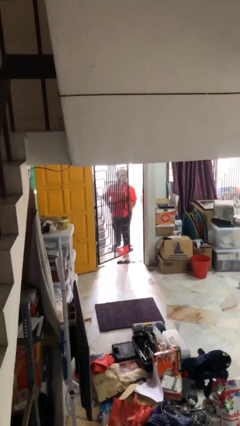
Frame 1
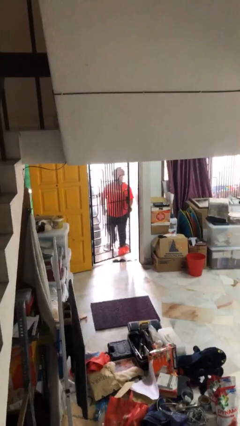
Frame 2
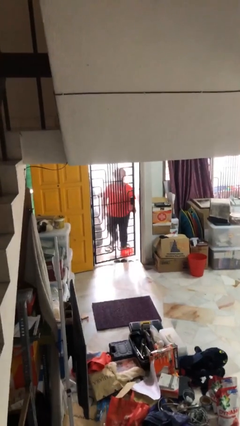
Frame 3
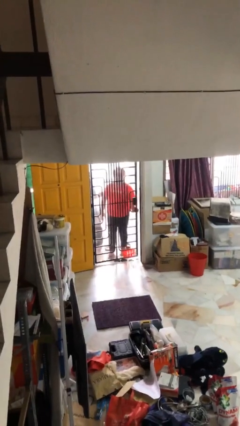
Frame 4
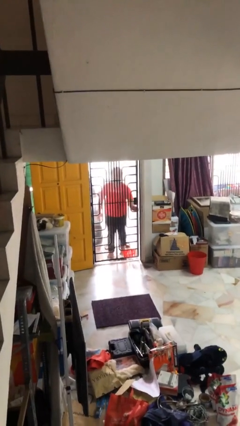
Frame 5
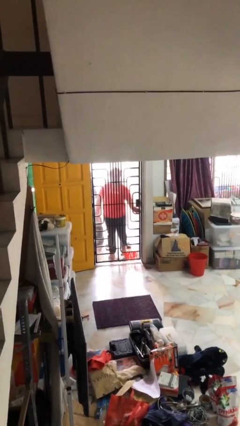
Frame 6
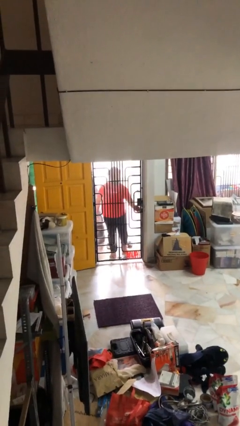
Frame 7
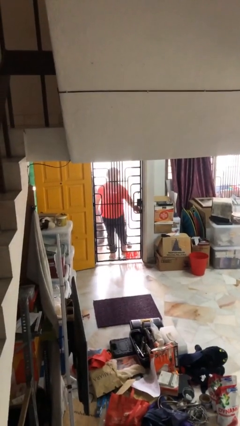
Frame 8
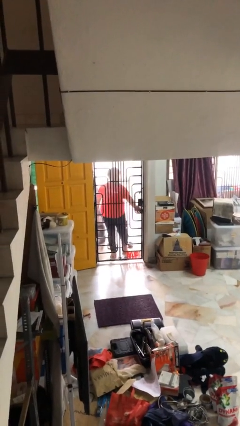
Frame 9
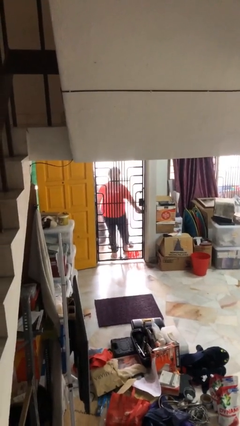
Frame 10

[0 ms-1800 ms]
person closes facility door

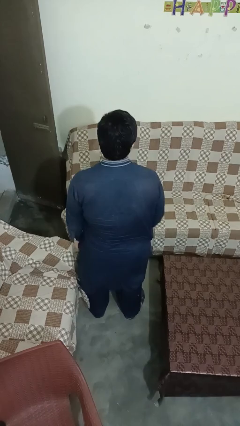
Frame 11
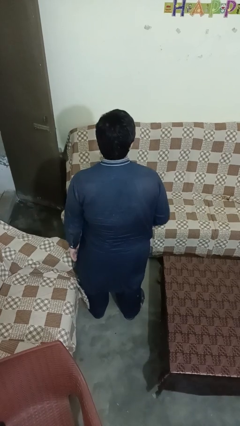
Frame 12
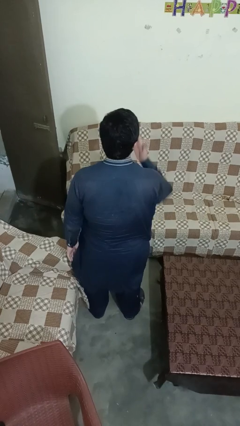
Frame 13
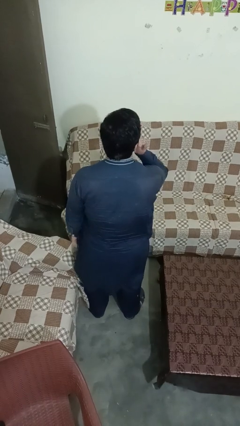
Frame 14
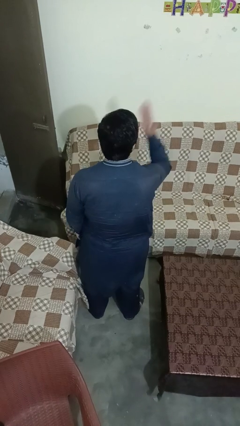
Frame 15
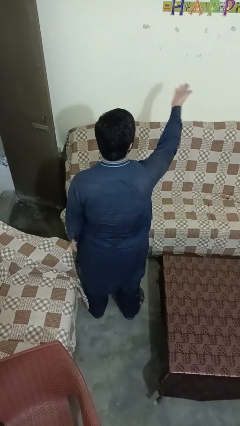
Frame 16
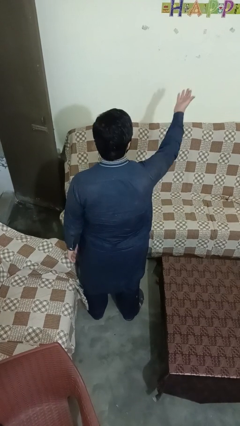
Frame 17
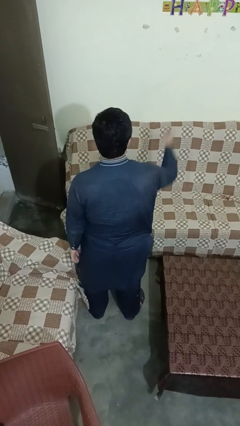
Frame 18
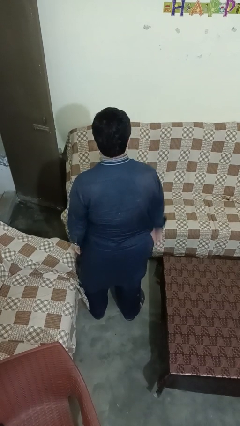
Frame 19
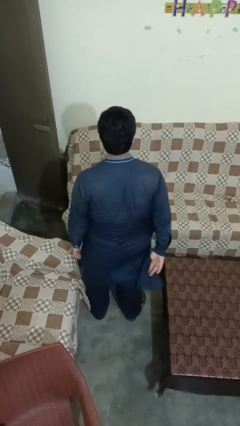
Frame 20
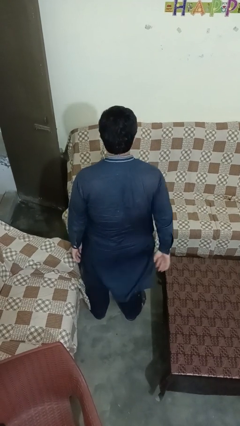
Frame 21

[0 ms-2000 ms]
person gestures blow kiss

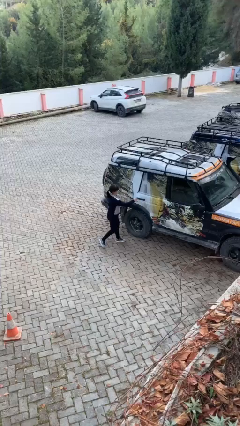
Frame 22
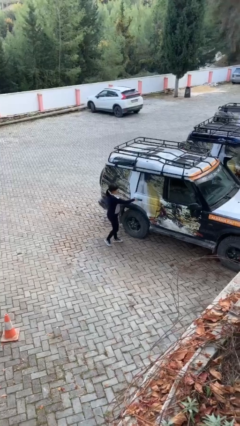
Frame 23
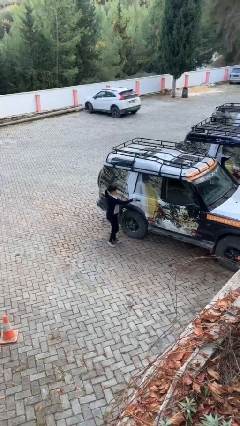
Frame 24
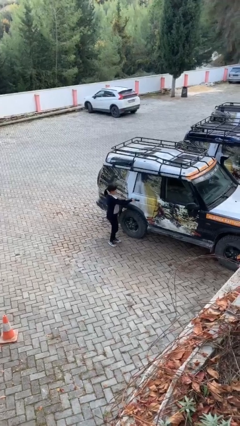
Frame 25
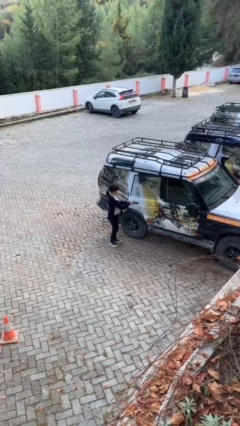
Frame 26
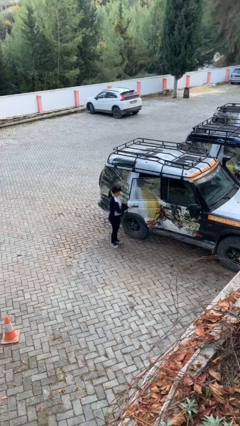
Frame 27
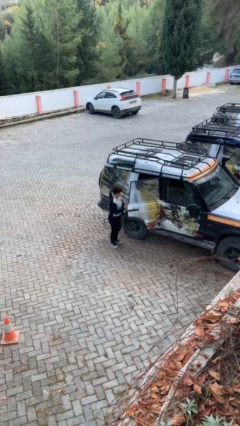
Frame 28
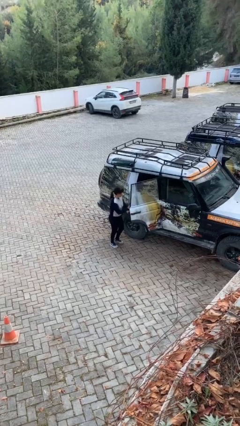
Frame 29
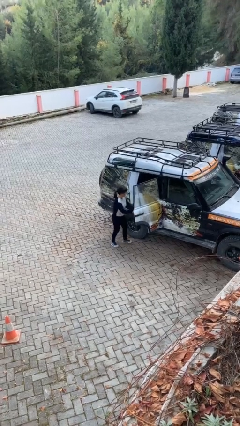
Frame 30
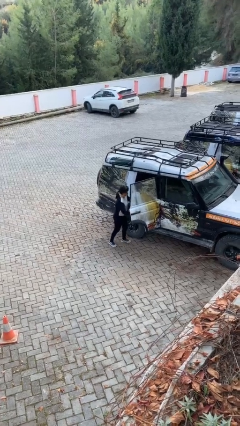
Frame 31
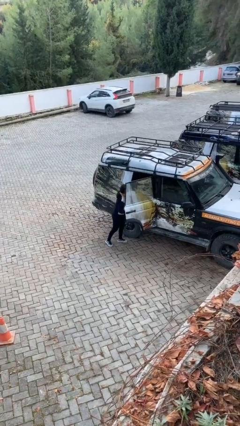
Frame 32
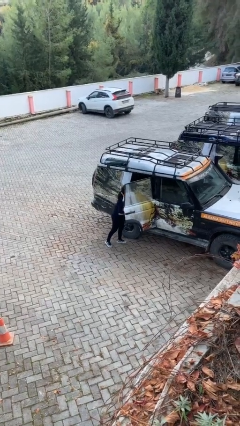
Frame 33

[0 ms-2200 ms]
person opens car door

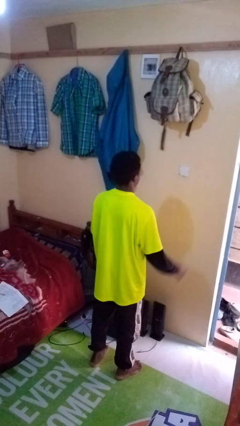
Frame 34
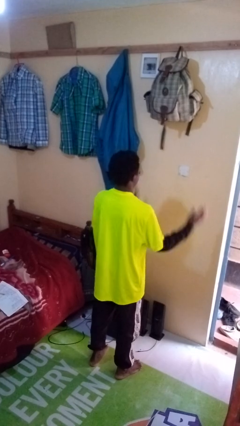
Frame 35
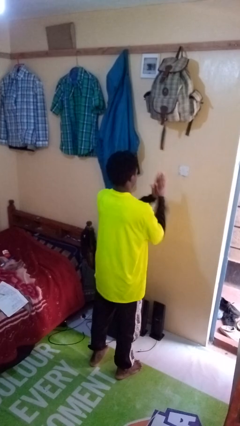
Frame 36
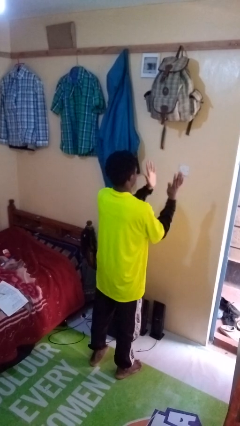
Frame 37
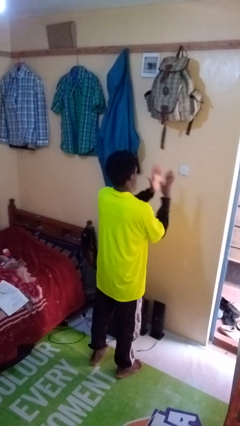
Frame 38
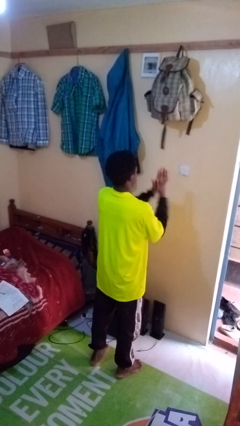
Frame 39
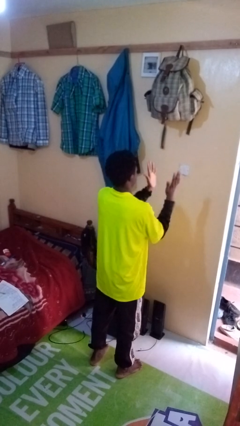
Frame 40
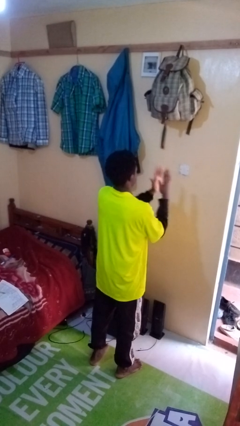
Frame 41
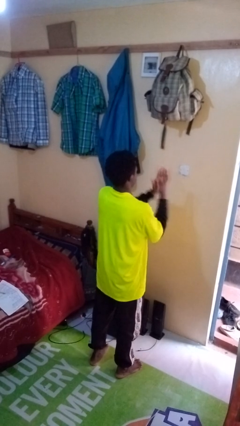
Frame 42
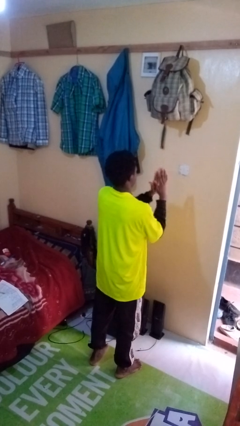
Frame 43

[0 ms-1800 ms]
person claps hands

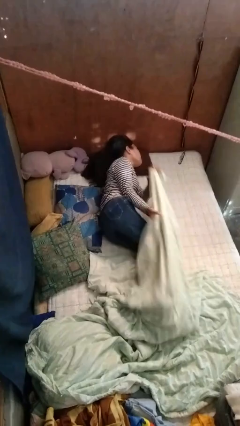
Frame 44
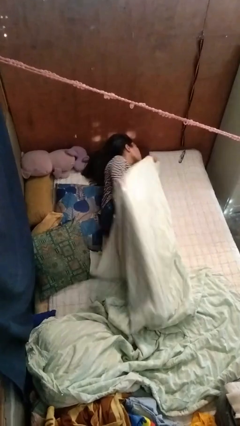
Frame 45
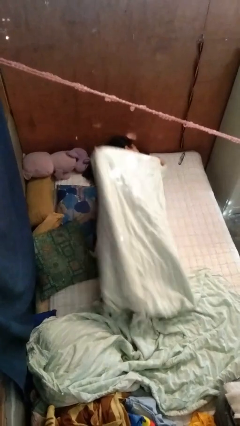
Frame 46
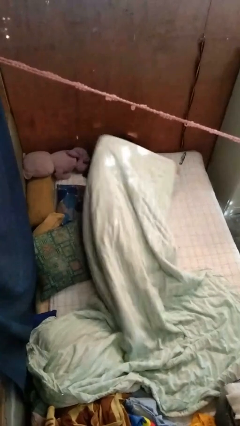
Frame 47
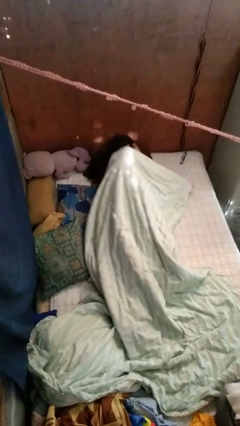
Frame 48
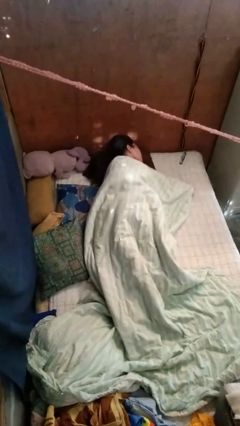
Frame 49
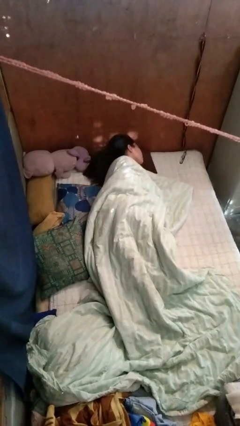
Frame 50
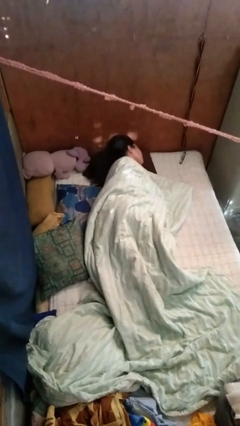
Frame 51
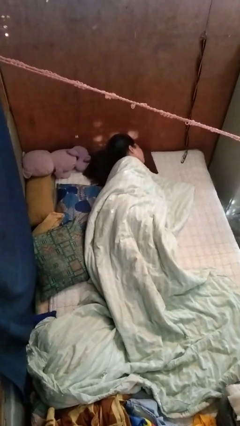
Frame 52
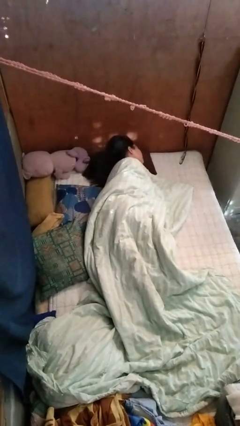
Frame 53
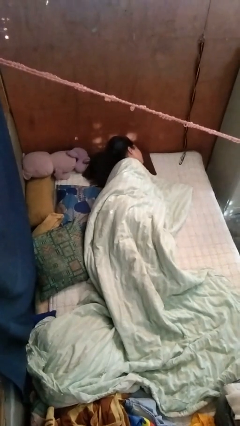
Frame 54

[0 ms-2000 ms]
person covers with bedsheets

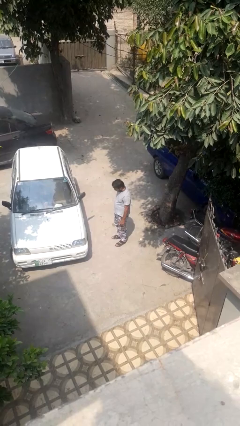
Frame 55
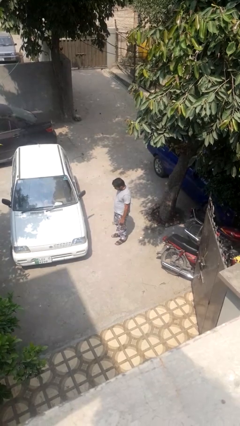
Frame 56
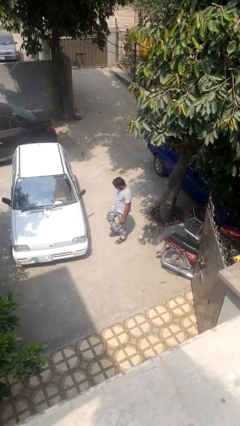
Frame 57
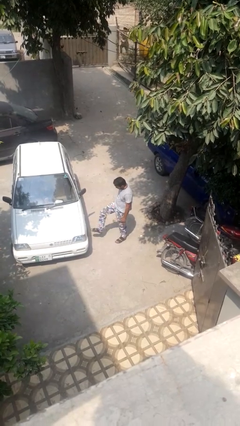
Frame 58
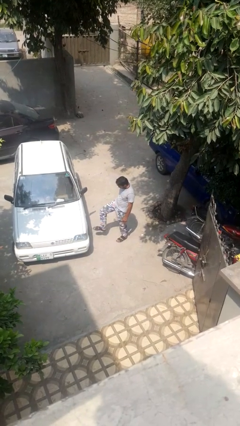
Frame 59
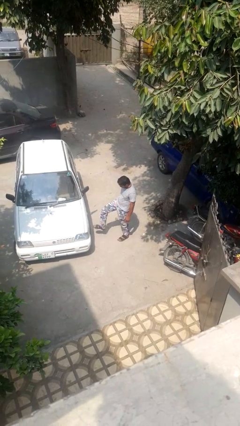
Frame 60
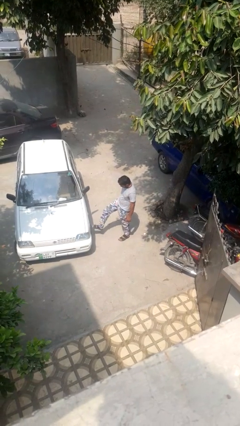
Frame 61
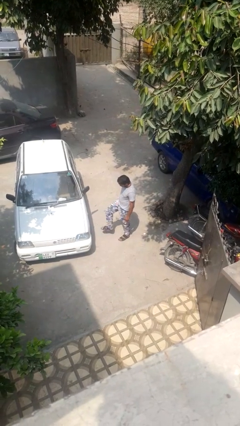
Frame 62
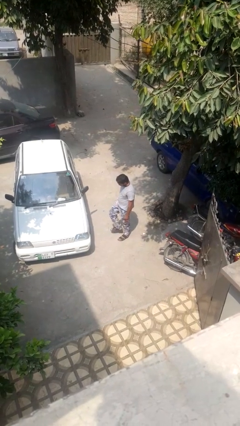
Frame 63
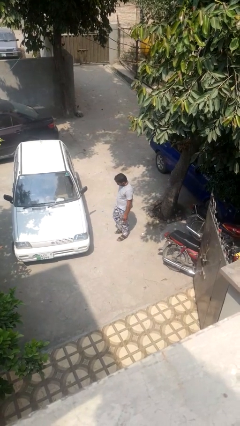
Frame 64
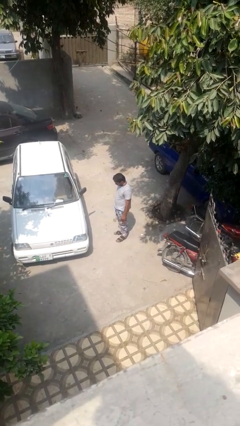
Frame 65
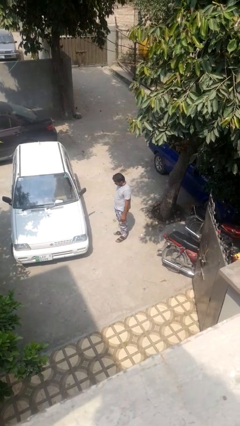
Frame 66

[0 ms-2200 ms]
person kicks car tires

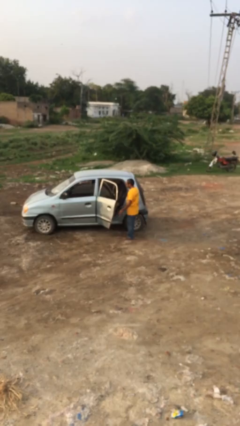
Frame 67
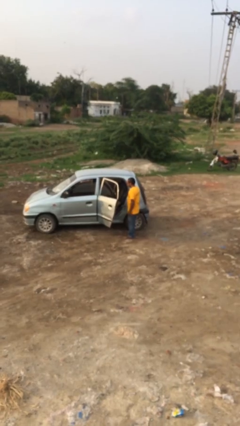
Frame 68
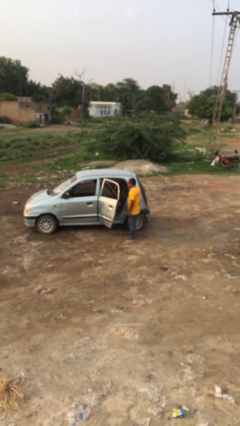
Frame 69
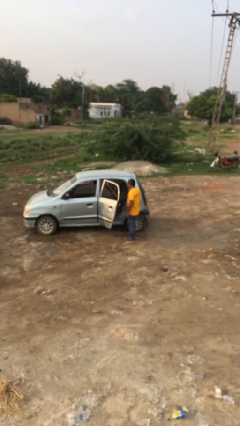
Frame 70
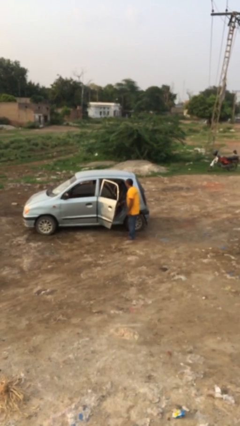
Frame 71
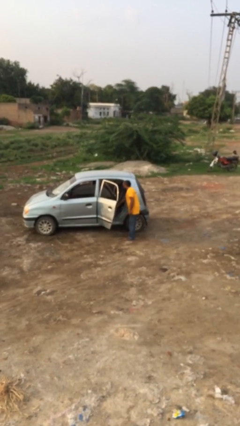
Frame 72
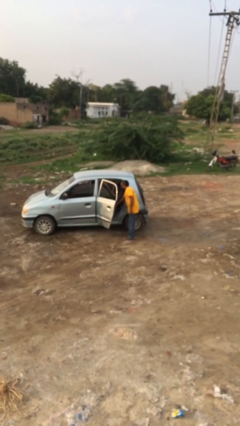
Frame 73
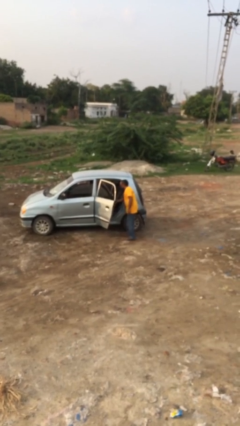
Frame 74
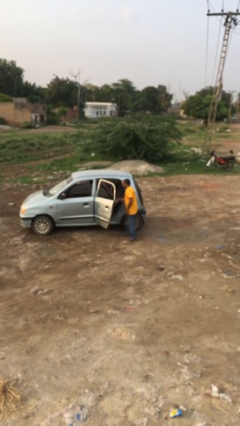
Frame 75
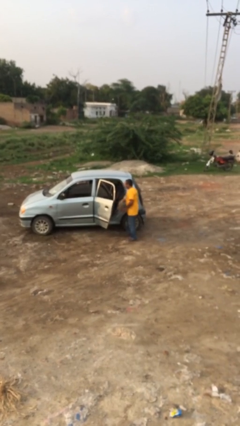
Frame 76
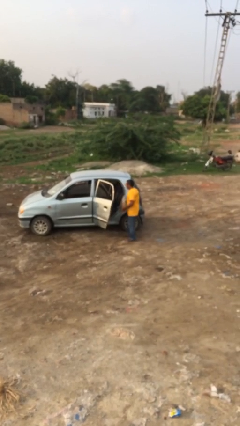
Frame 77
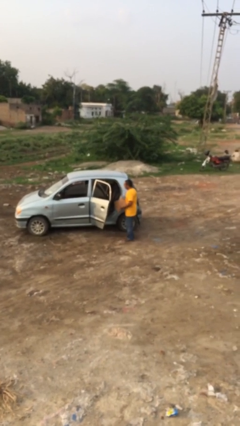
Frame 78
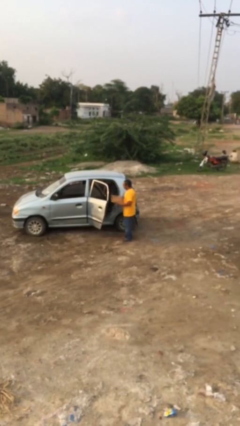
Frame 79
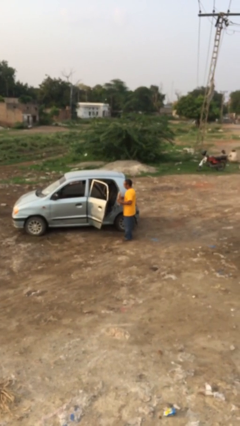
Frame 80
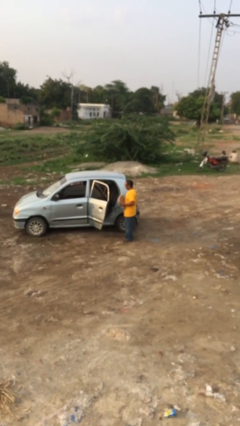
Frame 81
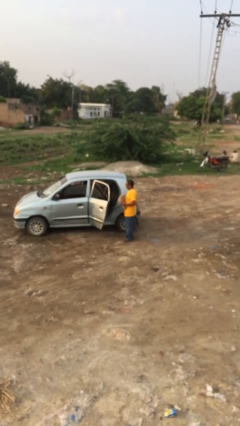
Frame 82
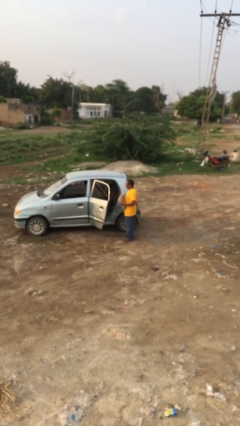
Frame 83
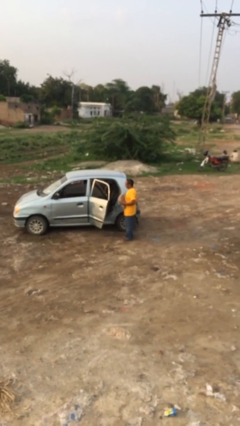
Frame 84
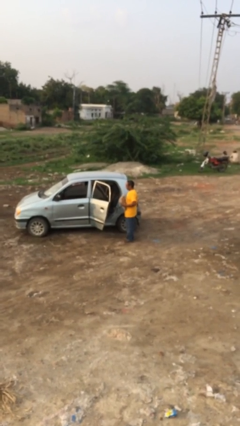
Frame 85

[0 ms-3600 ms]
person unloads car

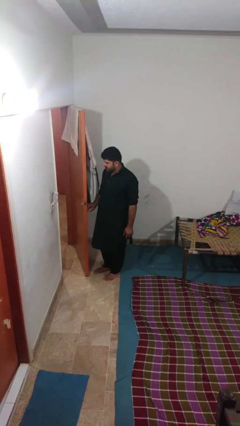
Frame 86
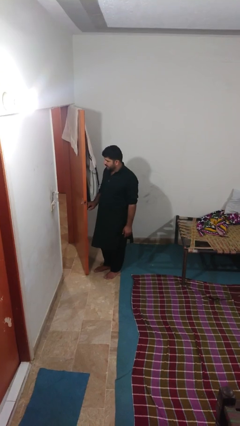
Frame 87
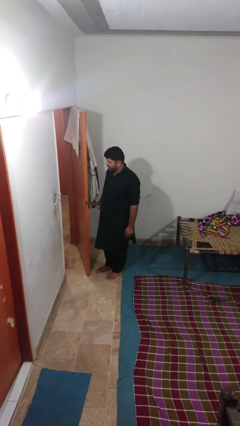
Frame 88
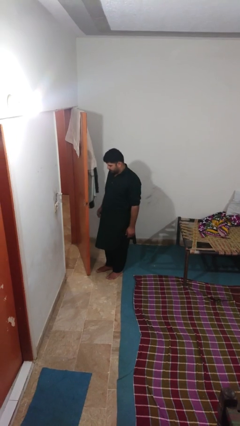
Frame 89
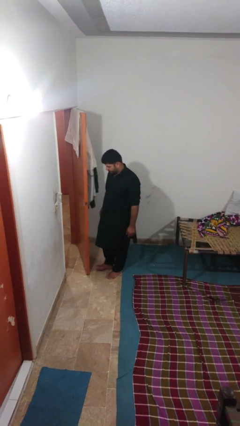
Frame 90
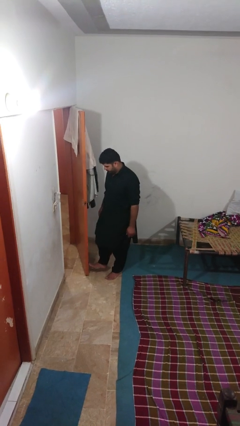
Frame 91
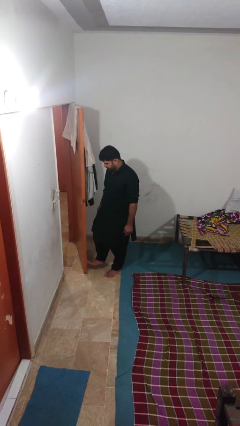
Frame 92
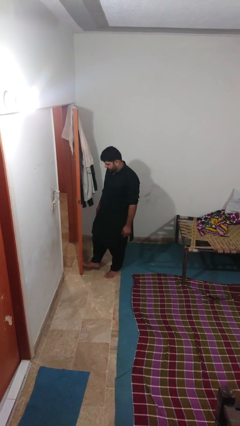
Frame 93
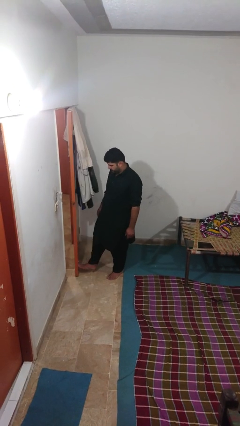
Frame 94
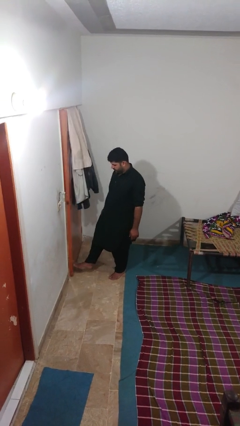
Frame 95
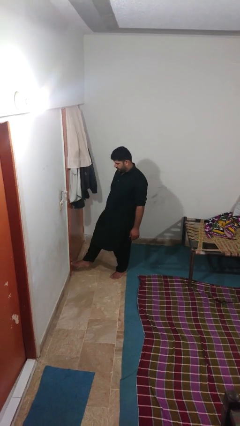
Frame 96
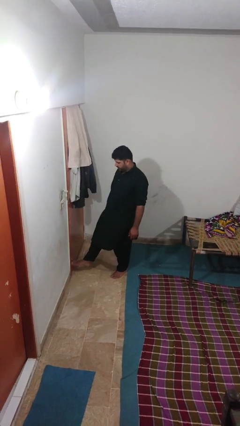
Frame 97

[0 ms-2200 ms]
person closes door with foot
